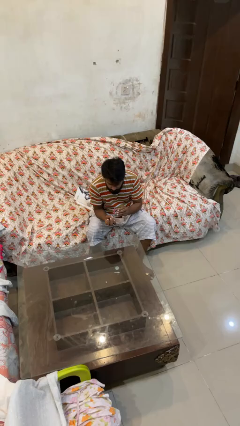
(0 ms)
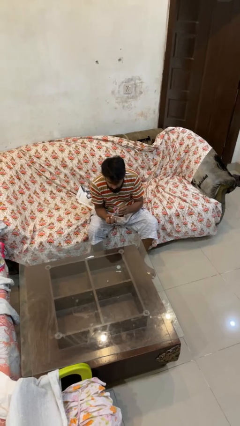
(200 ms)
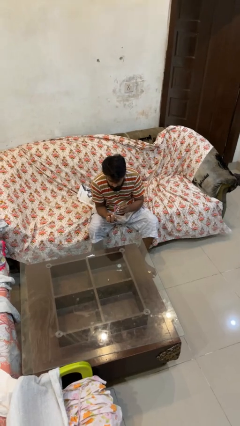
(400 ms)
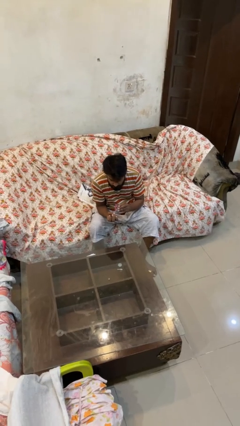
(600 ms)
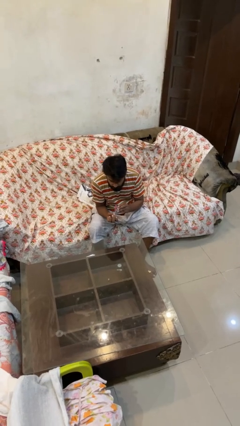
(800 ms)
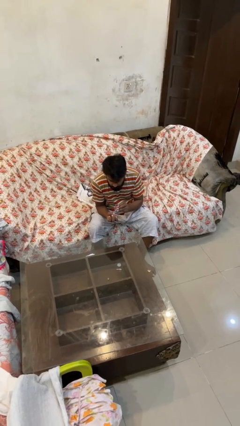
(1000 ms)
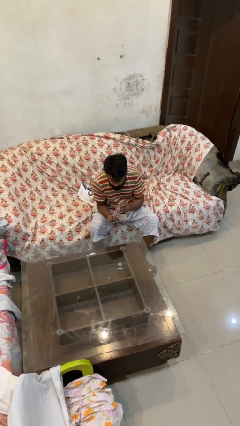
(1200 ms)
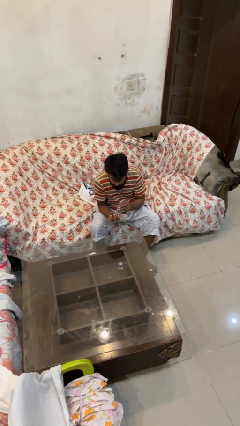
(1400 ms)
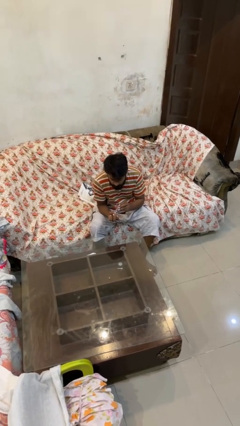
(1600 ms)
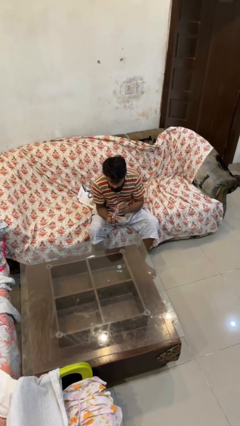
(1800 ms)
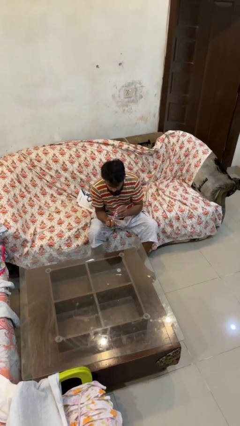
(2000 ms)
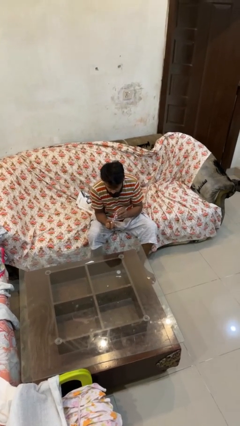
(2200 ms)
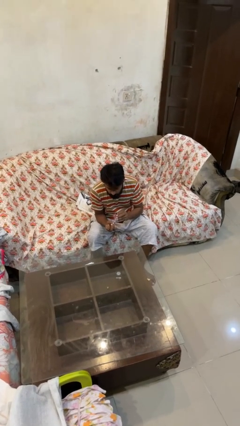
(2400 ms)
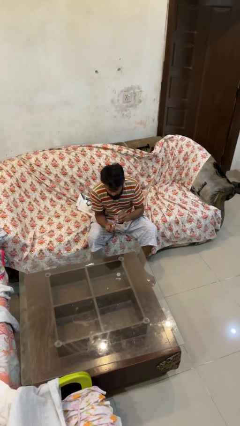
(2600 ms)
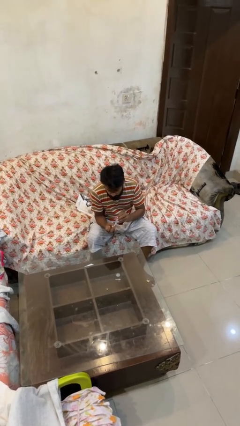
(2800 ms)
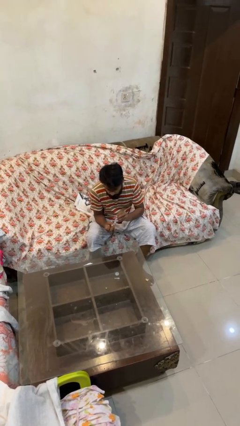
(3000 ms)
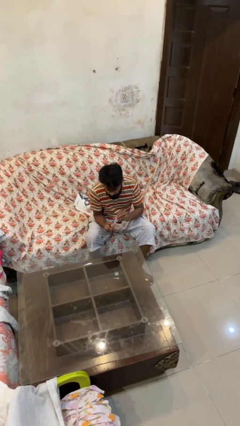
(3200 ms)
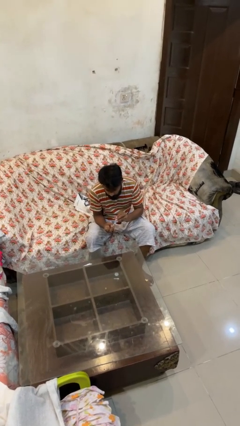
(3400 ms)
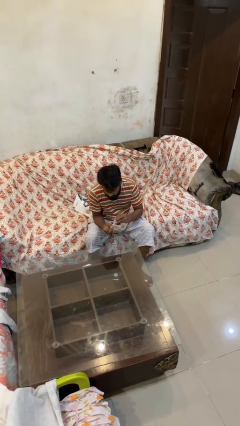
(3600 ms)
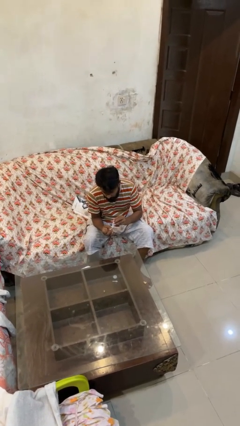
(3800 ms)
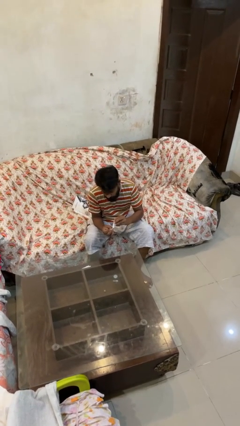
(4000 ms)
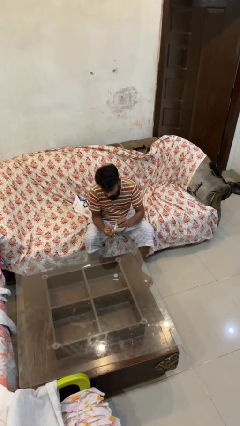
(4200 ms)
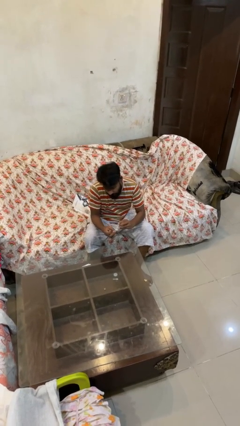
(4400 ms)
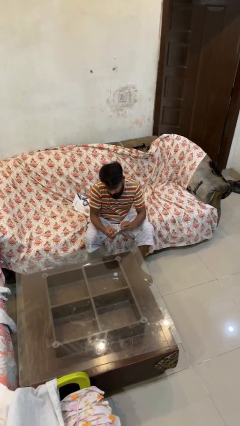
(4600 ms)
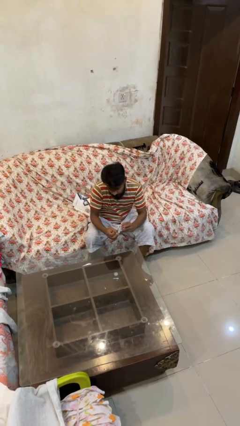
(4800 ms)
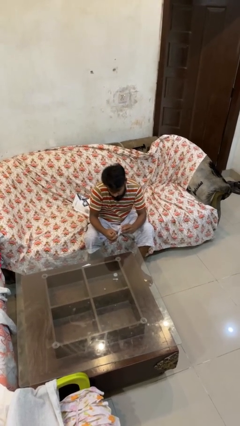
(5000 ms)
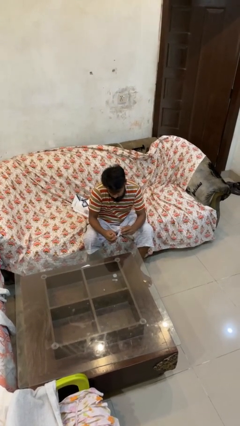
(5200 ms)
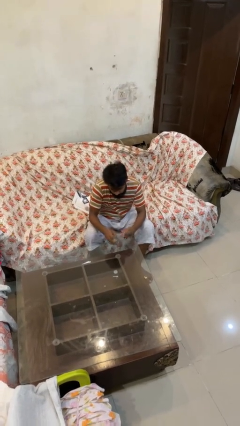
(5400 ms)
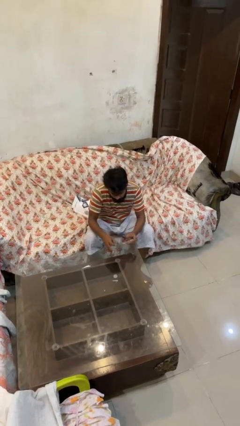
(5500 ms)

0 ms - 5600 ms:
person clips fingernails

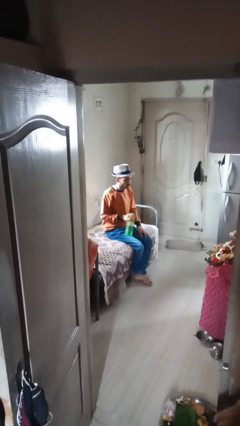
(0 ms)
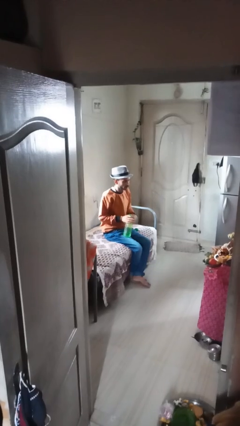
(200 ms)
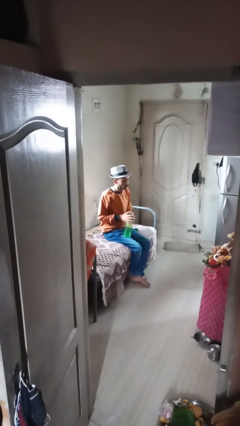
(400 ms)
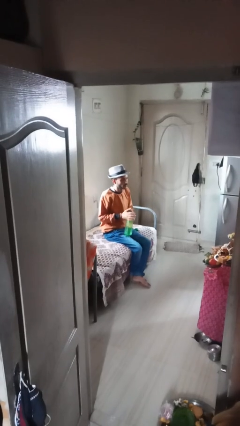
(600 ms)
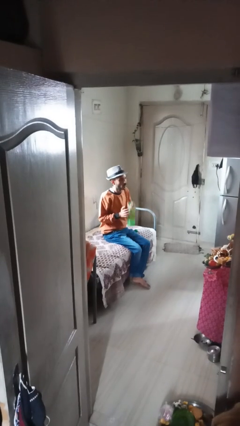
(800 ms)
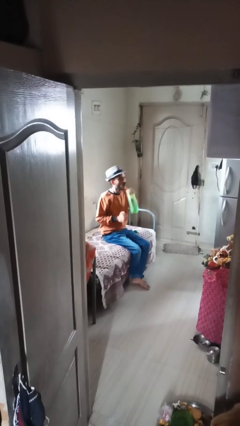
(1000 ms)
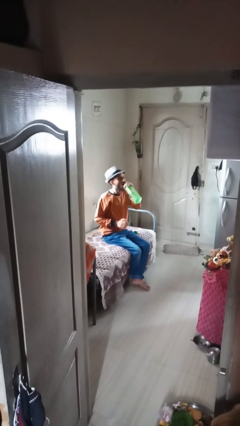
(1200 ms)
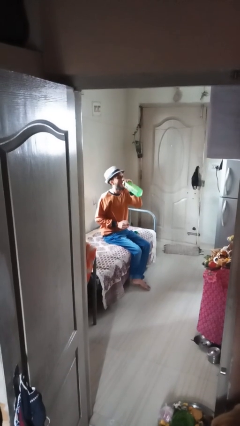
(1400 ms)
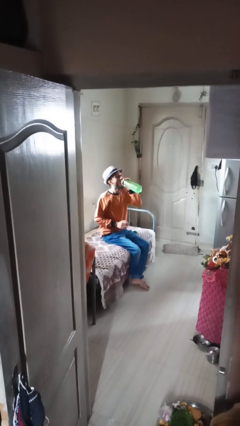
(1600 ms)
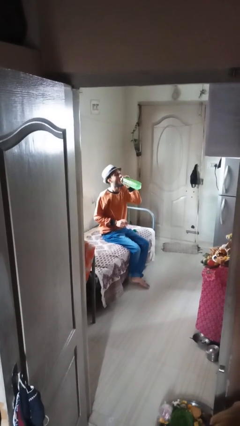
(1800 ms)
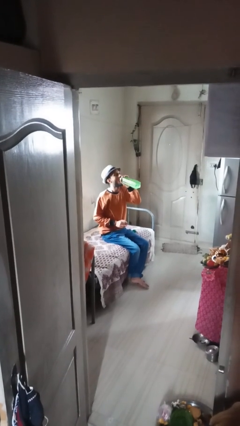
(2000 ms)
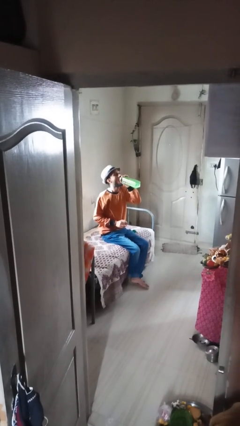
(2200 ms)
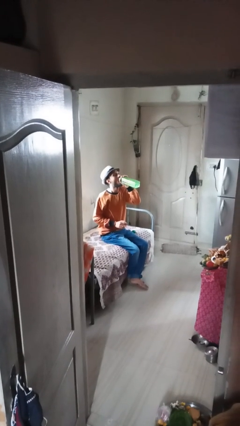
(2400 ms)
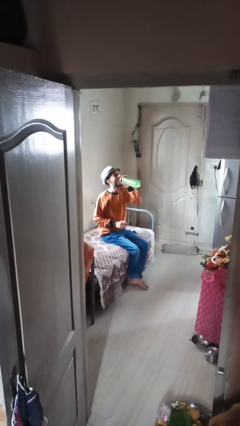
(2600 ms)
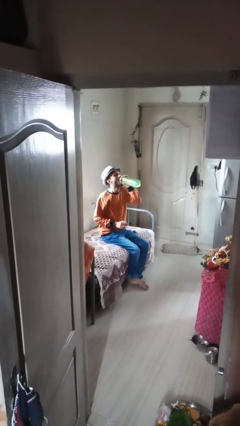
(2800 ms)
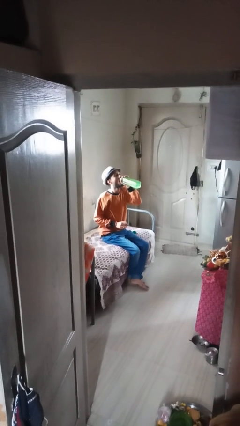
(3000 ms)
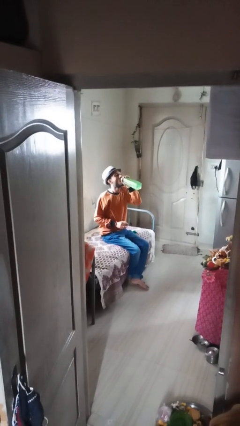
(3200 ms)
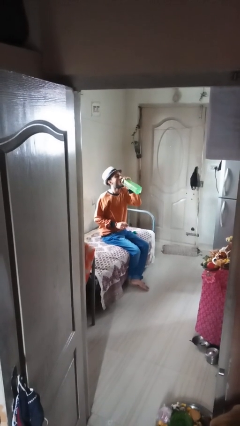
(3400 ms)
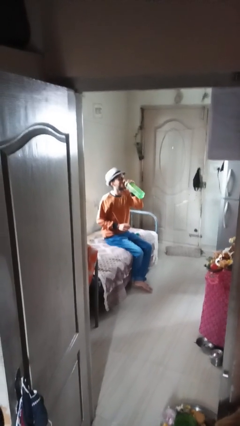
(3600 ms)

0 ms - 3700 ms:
person drinks from bottle

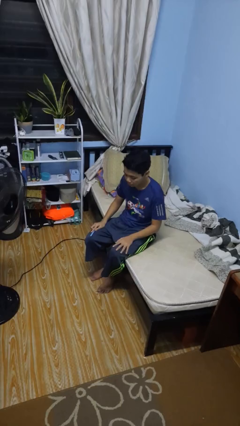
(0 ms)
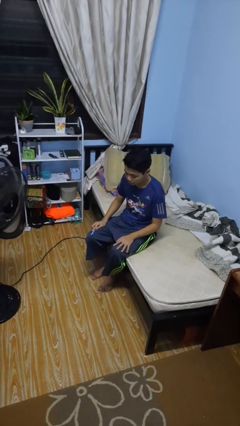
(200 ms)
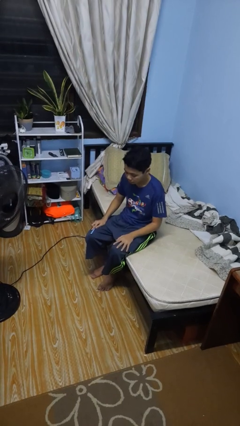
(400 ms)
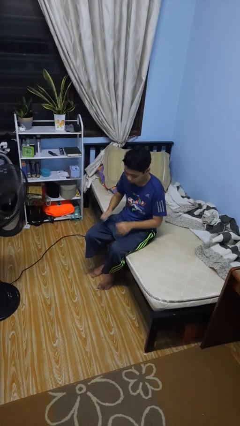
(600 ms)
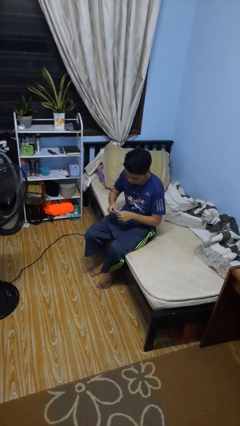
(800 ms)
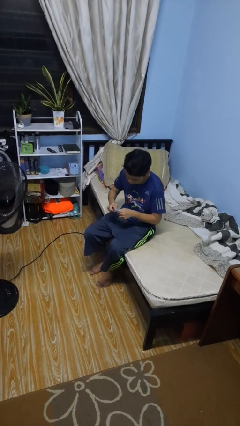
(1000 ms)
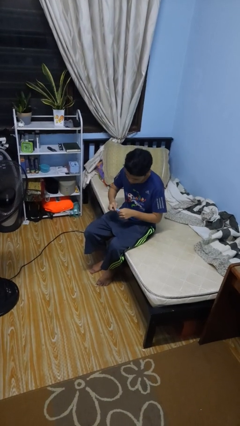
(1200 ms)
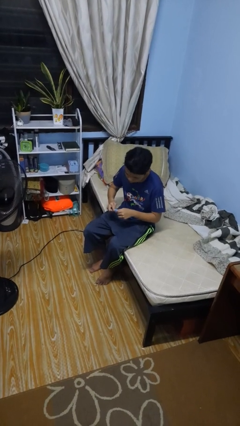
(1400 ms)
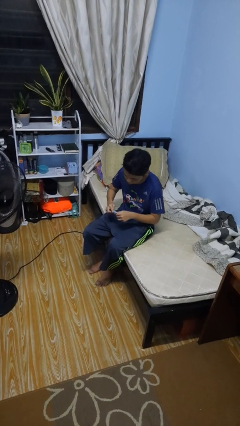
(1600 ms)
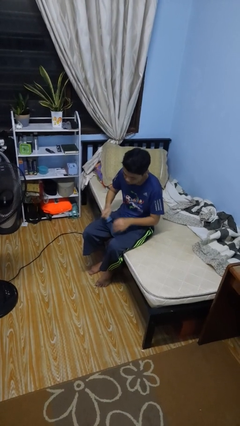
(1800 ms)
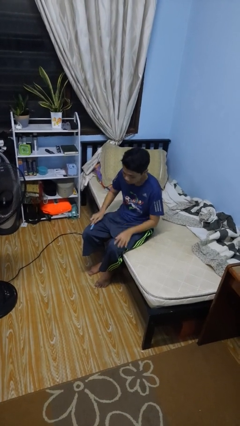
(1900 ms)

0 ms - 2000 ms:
person files fingernails

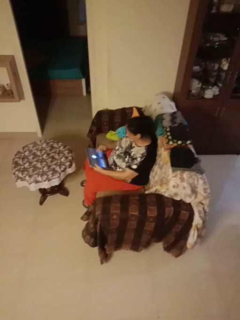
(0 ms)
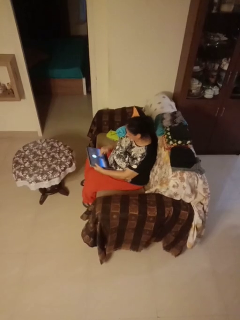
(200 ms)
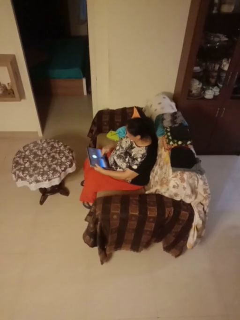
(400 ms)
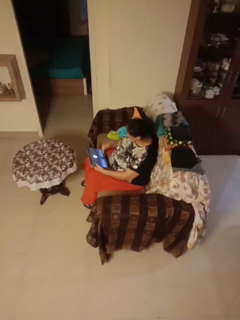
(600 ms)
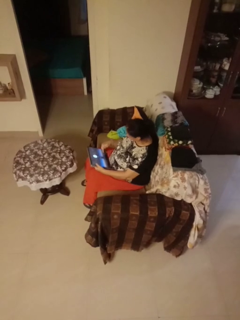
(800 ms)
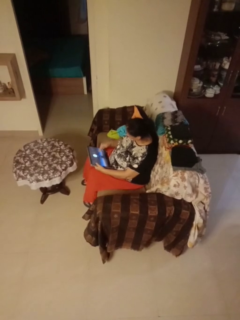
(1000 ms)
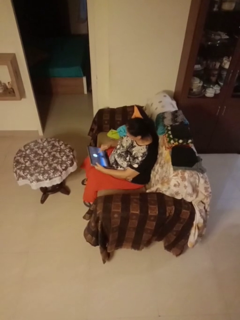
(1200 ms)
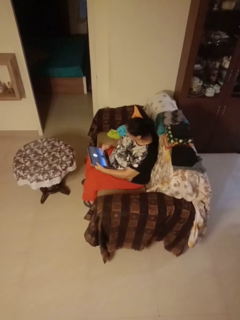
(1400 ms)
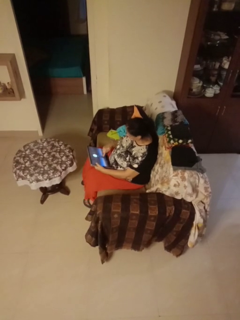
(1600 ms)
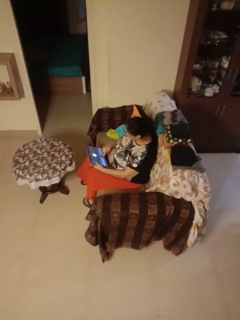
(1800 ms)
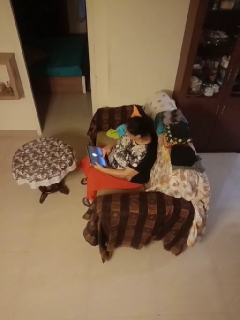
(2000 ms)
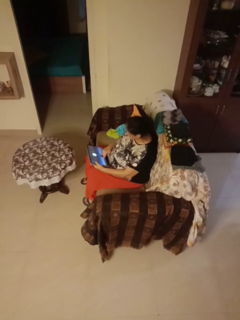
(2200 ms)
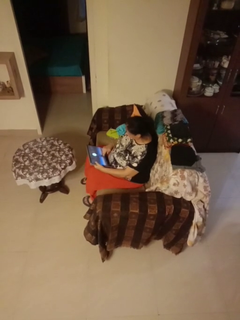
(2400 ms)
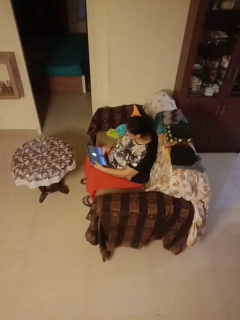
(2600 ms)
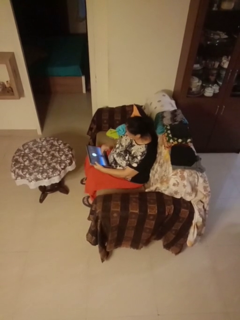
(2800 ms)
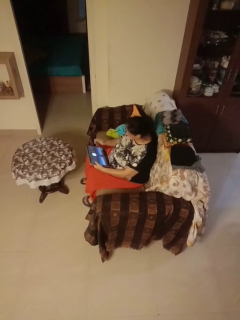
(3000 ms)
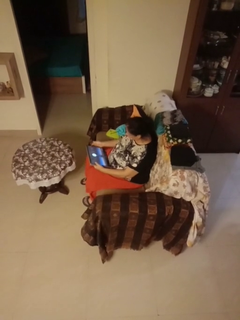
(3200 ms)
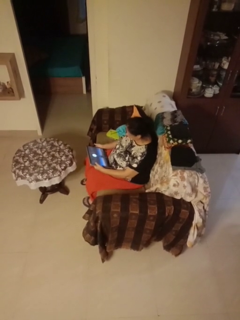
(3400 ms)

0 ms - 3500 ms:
person interacts with tablet

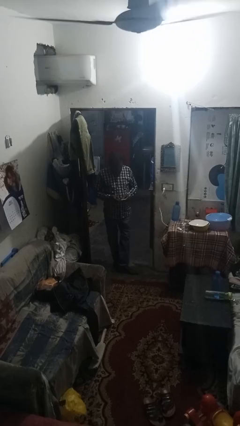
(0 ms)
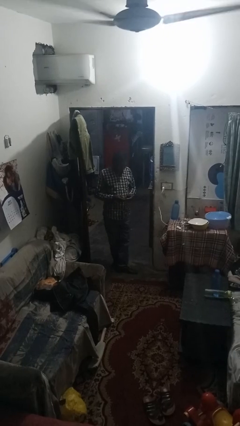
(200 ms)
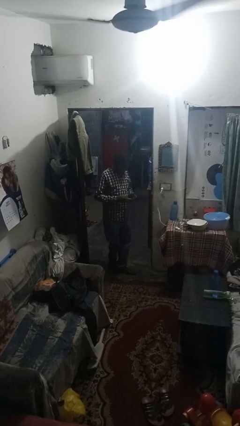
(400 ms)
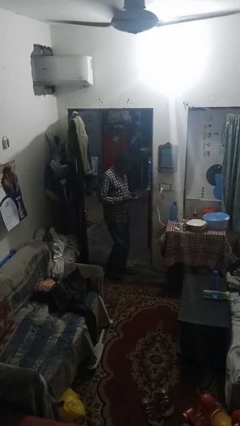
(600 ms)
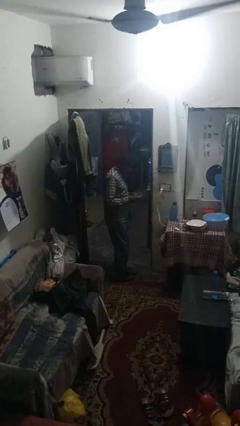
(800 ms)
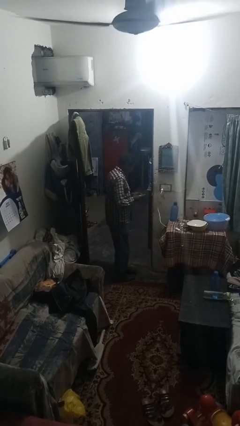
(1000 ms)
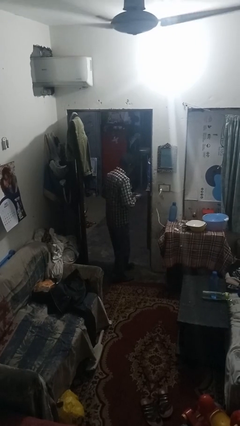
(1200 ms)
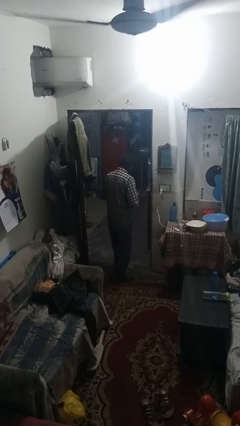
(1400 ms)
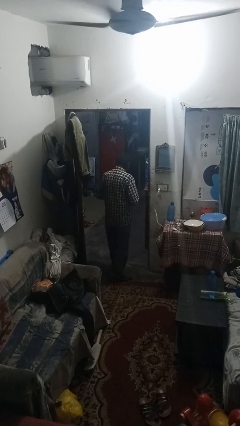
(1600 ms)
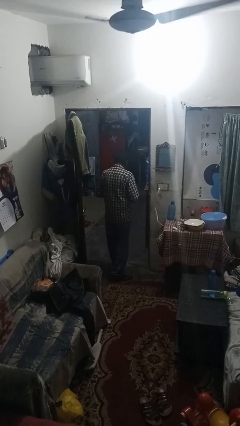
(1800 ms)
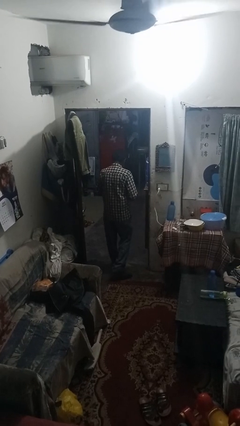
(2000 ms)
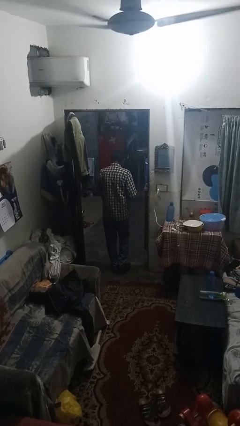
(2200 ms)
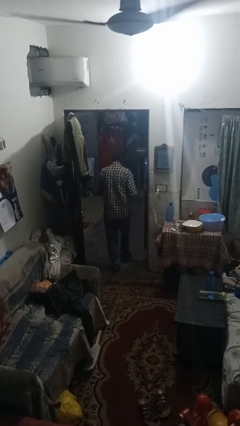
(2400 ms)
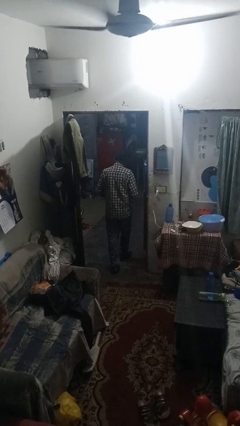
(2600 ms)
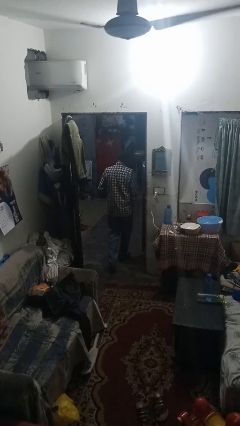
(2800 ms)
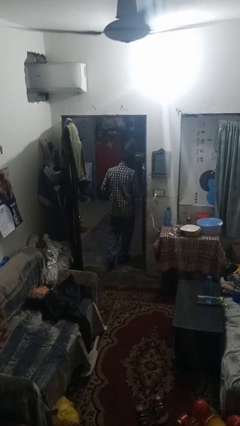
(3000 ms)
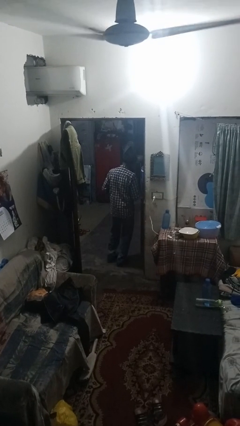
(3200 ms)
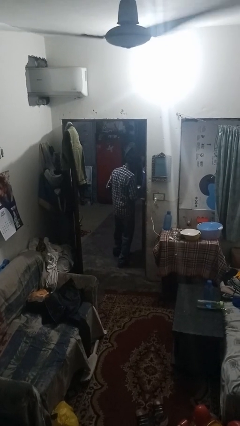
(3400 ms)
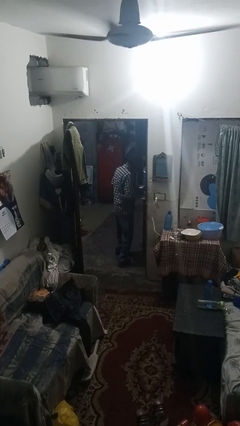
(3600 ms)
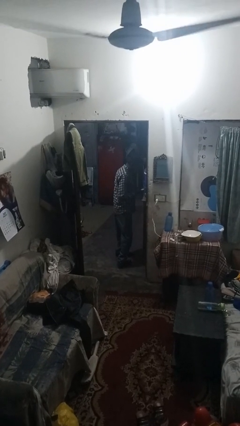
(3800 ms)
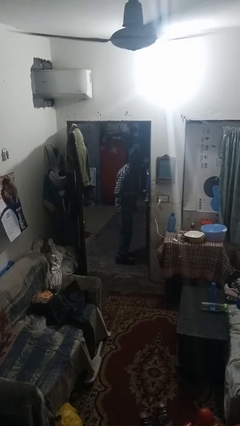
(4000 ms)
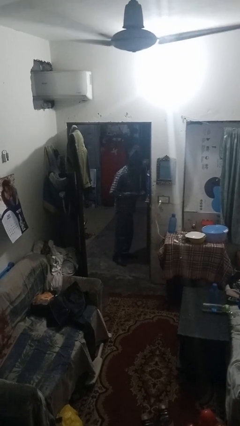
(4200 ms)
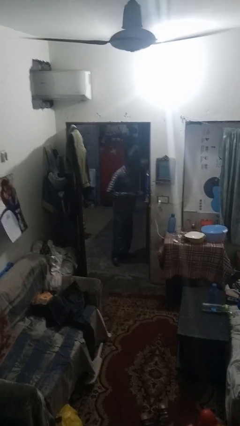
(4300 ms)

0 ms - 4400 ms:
person exits scene through structure
